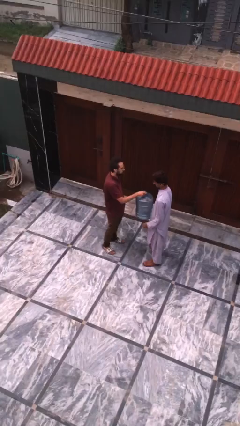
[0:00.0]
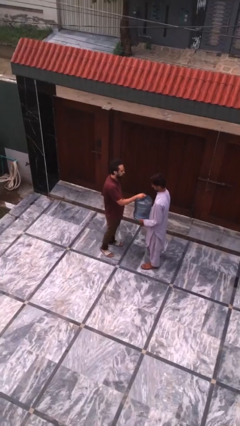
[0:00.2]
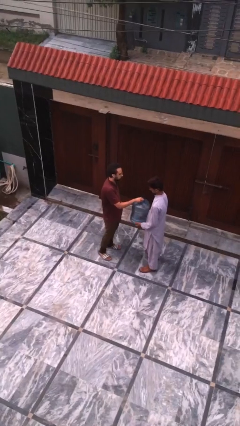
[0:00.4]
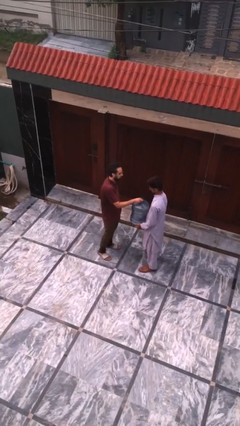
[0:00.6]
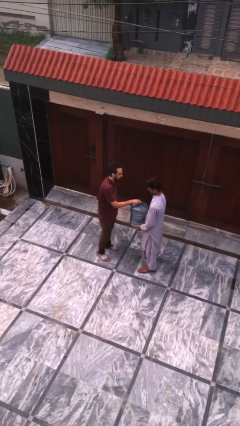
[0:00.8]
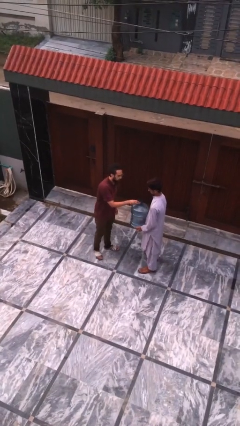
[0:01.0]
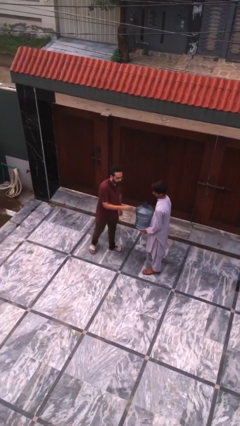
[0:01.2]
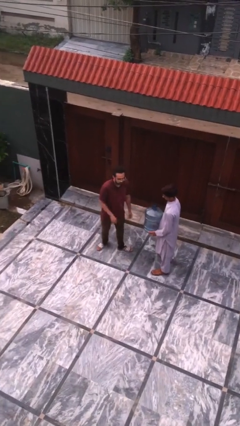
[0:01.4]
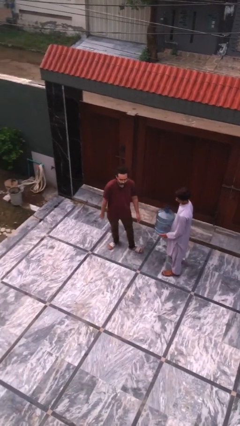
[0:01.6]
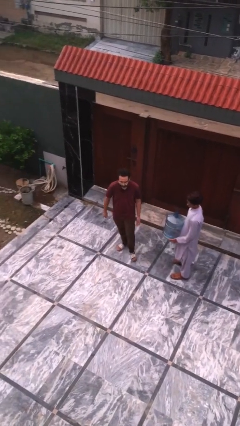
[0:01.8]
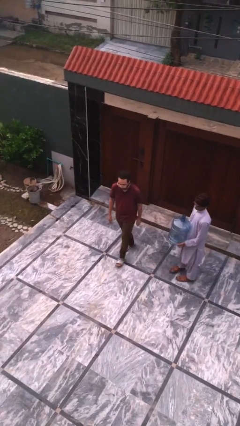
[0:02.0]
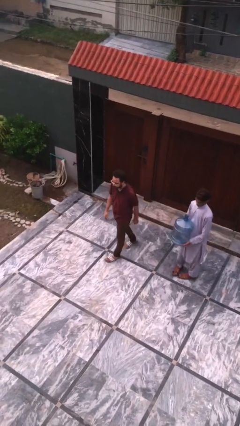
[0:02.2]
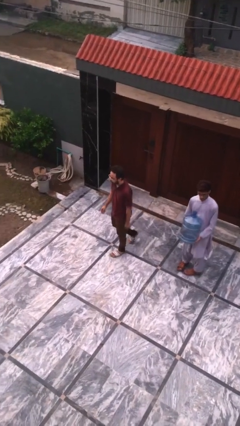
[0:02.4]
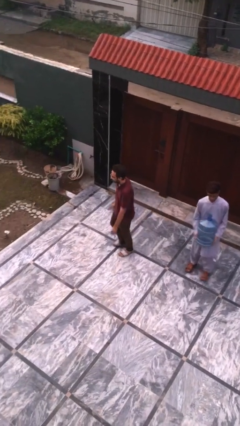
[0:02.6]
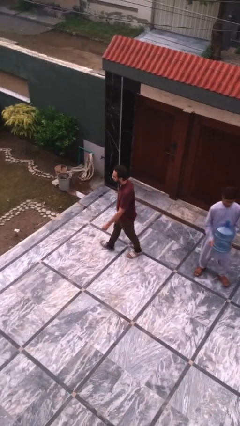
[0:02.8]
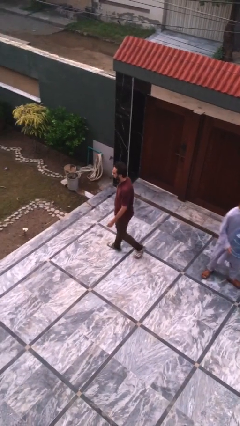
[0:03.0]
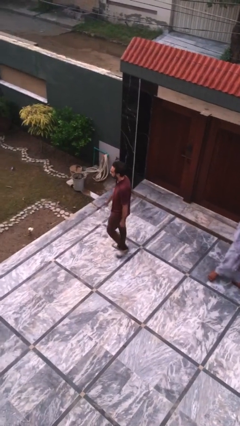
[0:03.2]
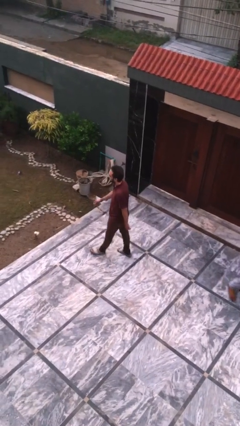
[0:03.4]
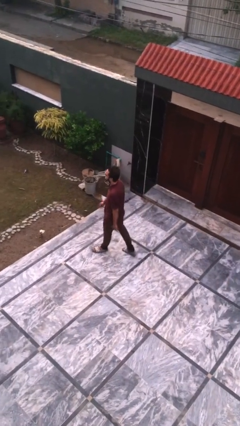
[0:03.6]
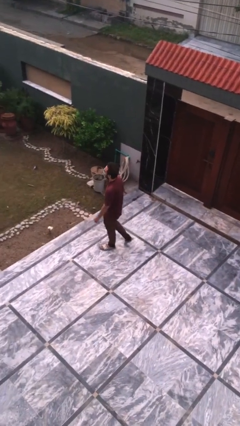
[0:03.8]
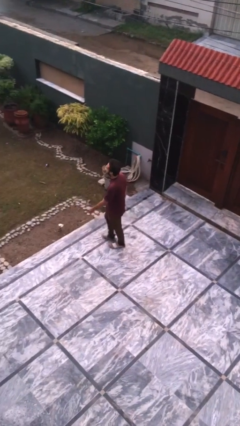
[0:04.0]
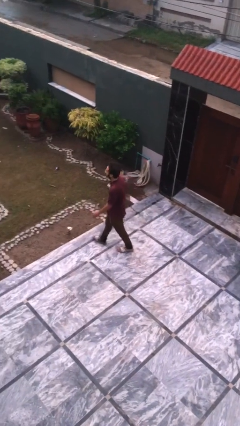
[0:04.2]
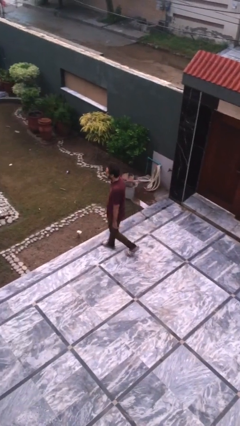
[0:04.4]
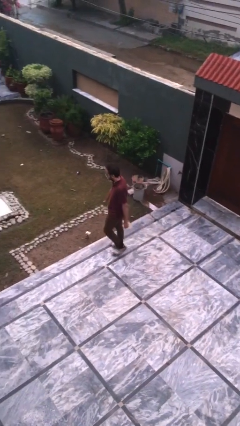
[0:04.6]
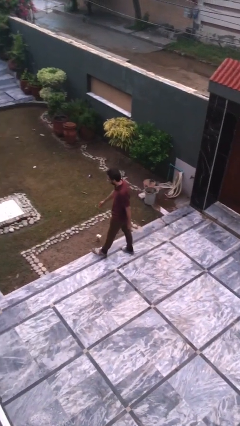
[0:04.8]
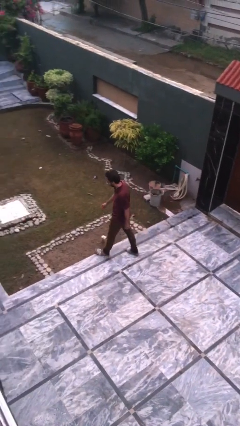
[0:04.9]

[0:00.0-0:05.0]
person transfers object to person

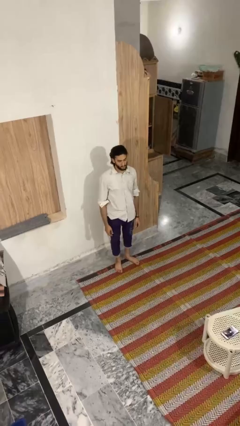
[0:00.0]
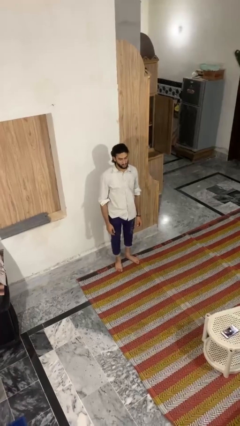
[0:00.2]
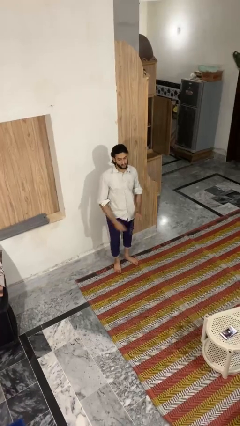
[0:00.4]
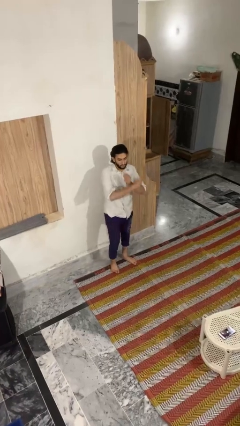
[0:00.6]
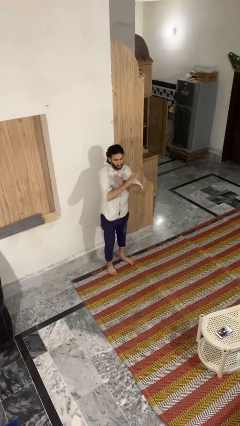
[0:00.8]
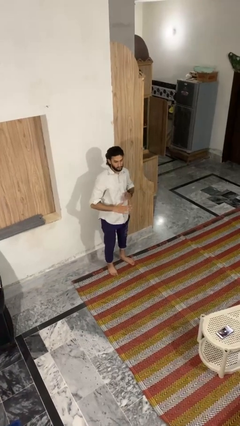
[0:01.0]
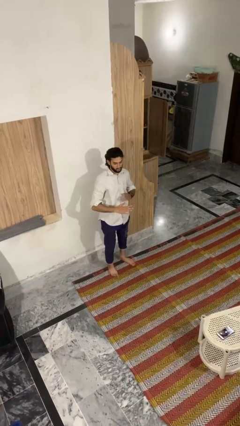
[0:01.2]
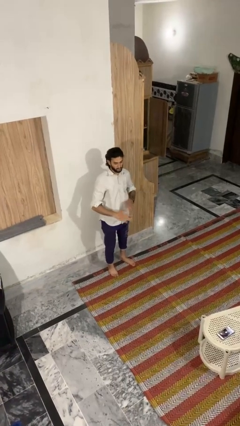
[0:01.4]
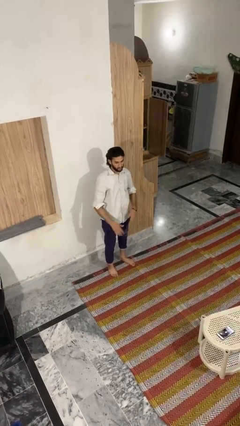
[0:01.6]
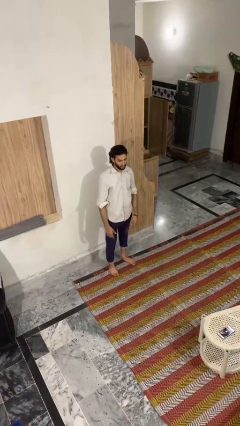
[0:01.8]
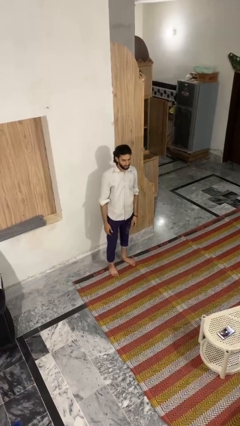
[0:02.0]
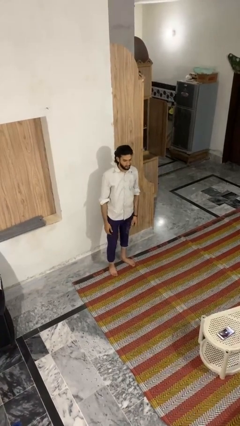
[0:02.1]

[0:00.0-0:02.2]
person karate chop

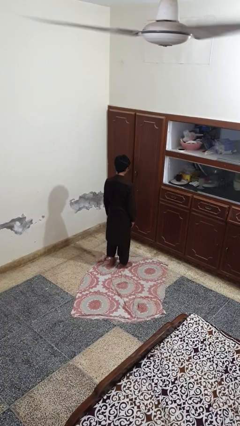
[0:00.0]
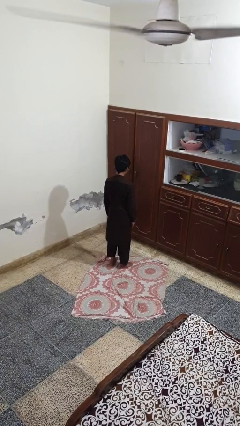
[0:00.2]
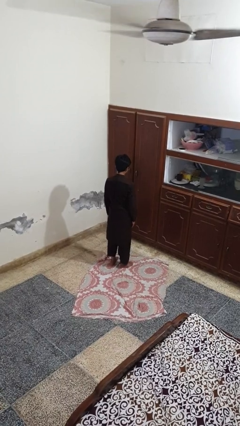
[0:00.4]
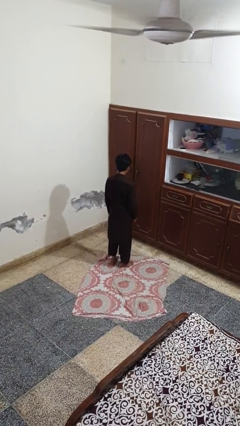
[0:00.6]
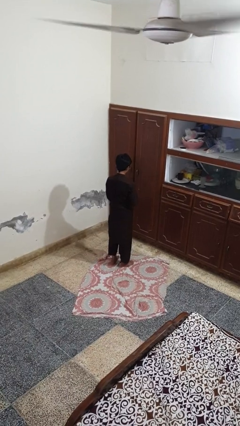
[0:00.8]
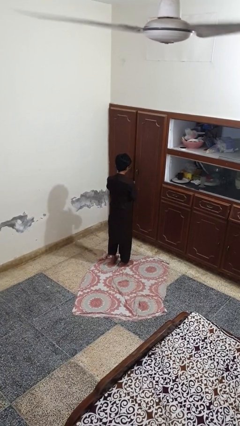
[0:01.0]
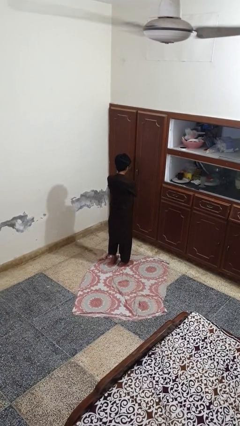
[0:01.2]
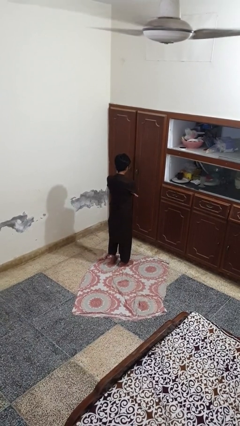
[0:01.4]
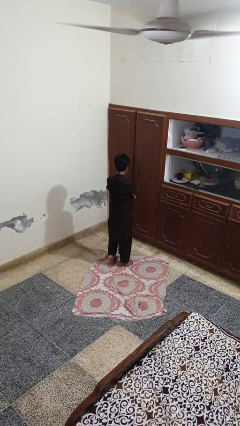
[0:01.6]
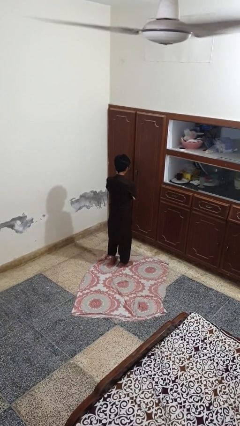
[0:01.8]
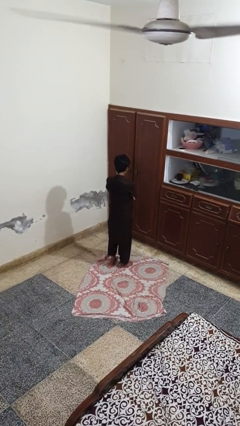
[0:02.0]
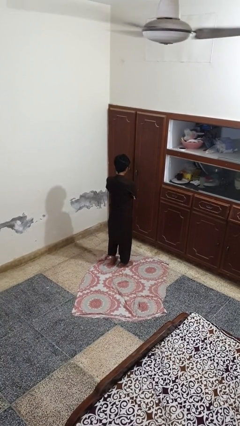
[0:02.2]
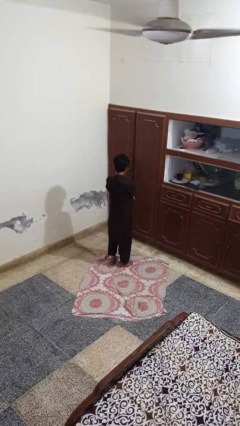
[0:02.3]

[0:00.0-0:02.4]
person crosses arms

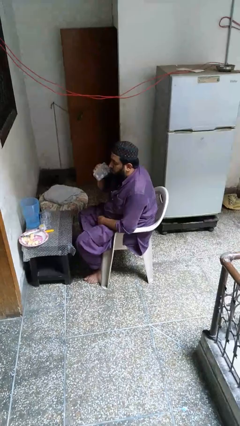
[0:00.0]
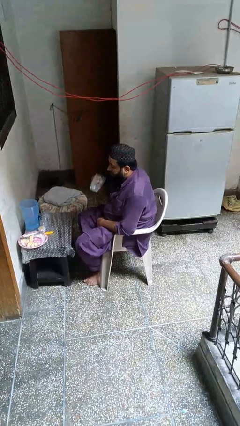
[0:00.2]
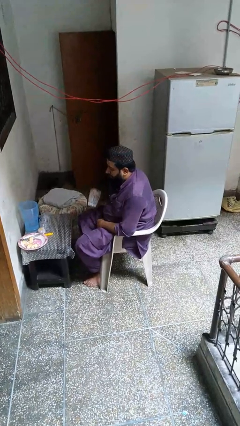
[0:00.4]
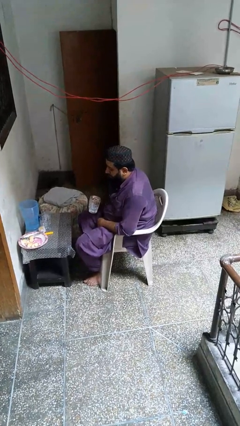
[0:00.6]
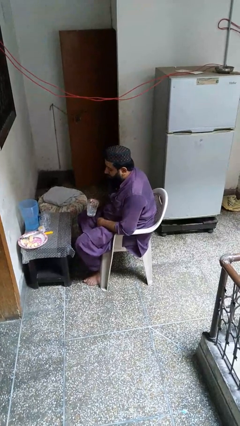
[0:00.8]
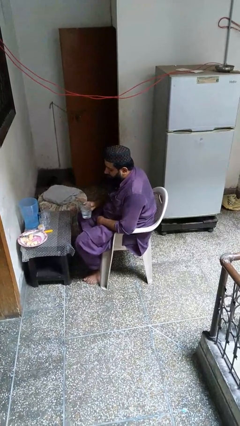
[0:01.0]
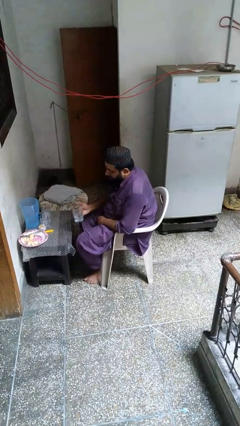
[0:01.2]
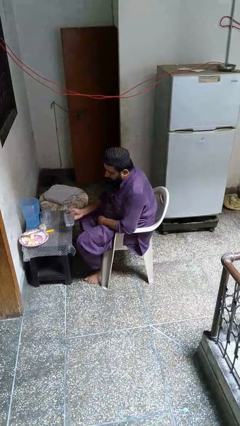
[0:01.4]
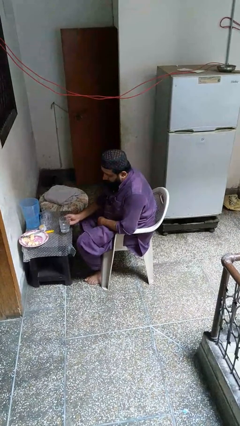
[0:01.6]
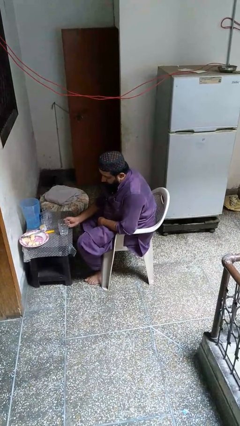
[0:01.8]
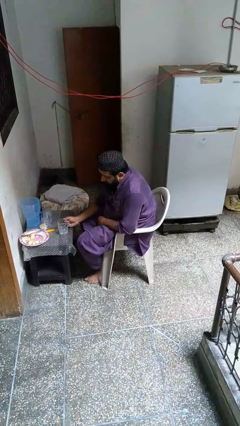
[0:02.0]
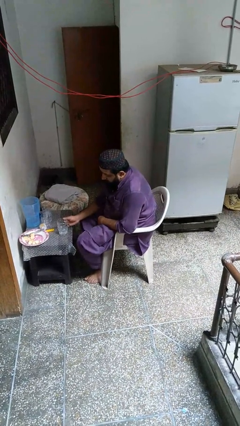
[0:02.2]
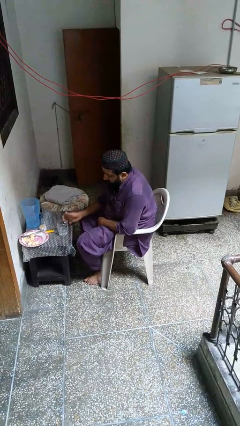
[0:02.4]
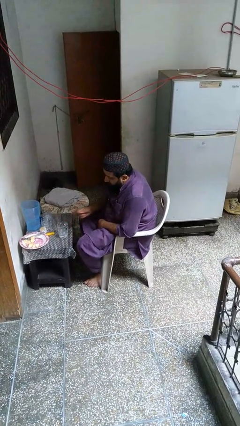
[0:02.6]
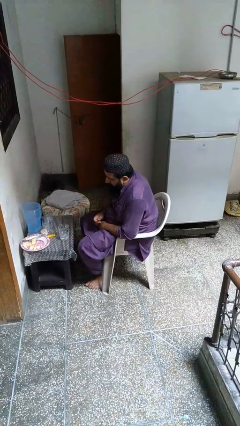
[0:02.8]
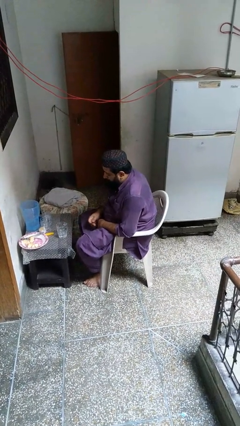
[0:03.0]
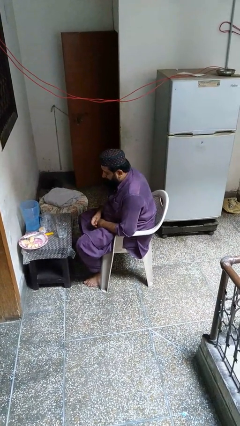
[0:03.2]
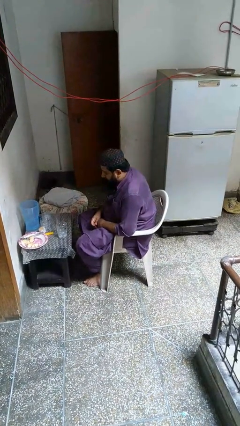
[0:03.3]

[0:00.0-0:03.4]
person puts down object on table

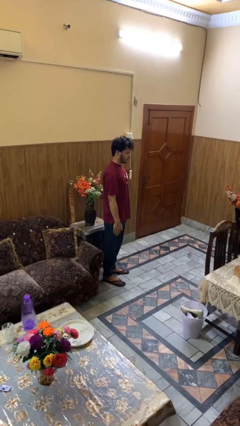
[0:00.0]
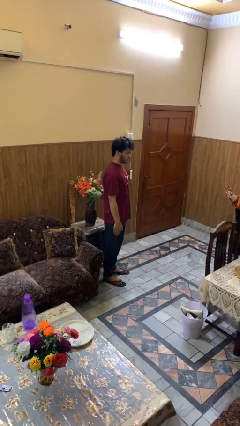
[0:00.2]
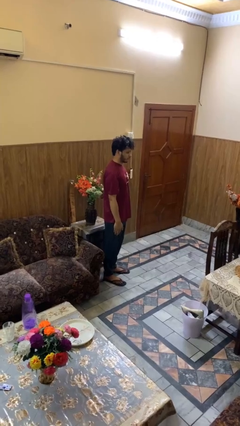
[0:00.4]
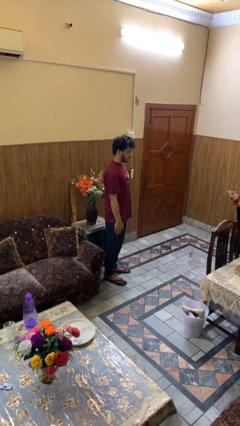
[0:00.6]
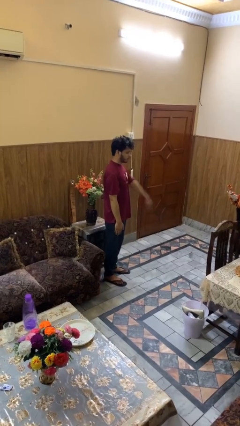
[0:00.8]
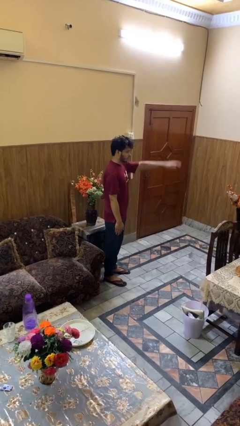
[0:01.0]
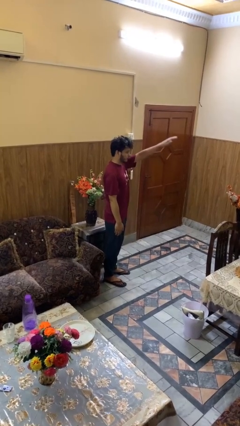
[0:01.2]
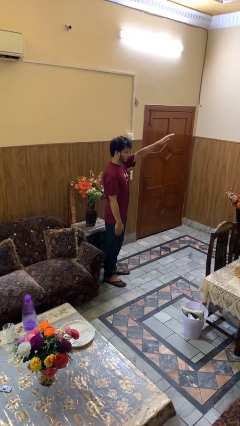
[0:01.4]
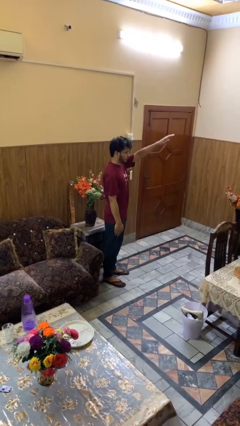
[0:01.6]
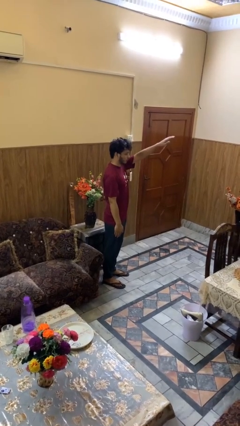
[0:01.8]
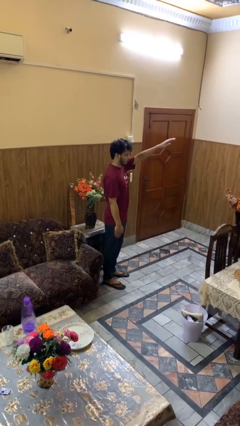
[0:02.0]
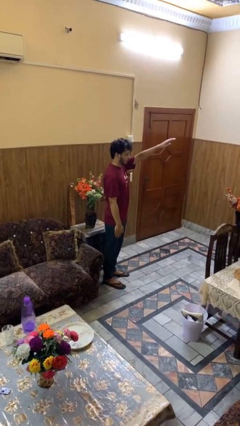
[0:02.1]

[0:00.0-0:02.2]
person gestures swipe up

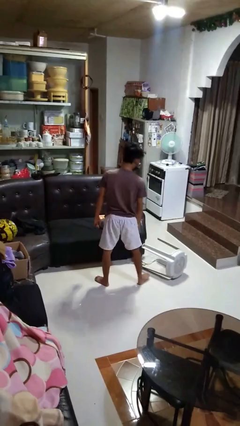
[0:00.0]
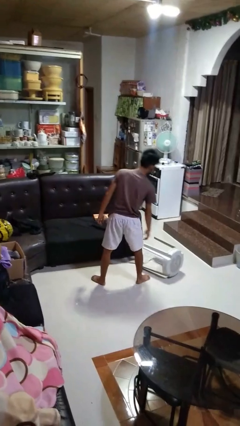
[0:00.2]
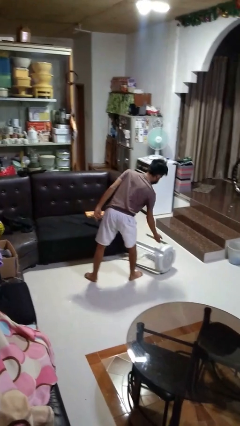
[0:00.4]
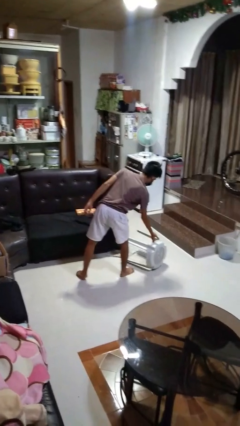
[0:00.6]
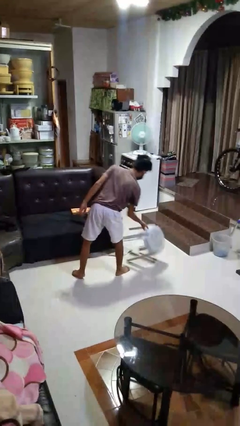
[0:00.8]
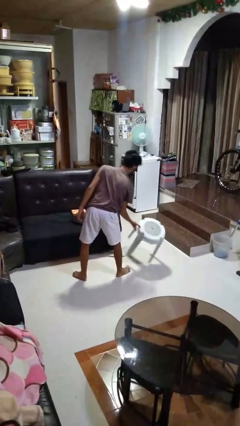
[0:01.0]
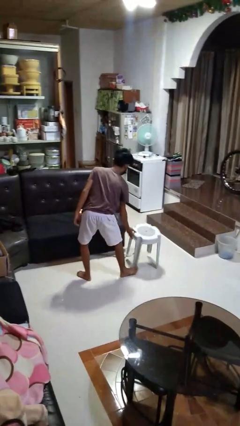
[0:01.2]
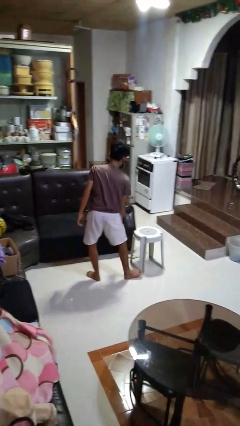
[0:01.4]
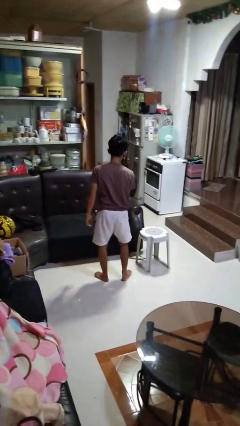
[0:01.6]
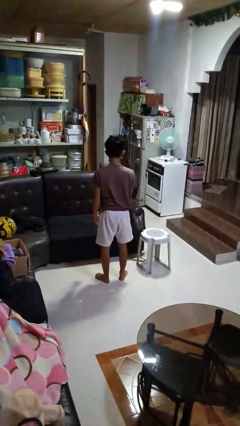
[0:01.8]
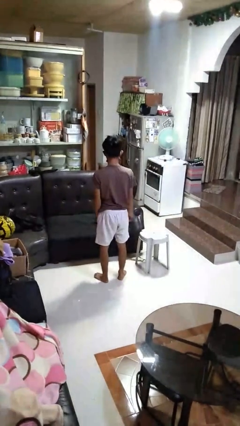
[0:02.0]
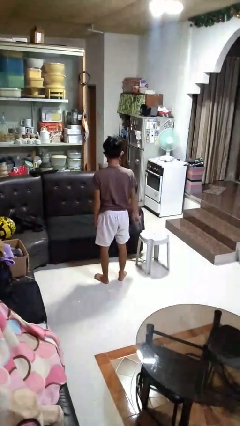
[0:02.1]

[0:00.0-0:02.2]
person sets upright furniture
